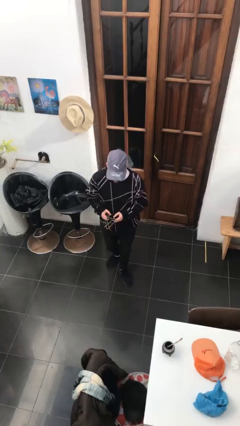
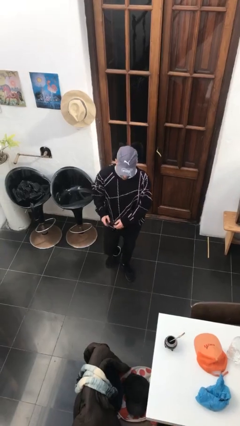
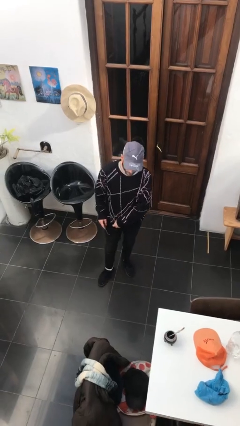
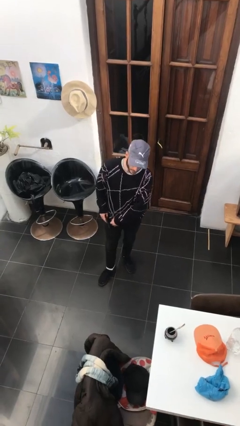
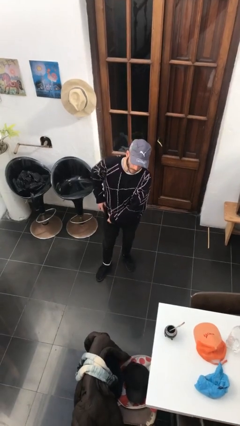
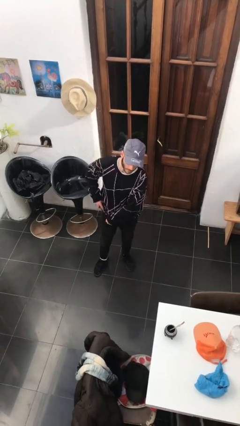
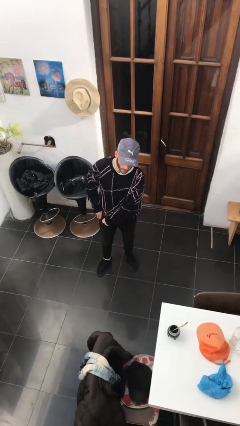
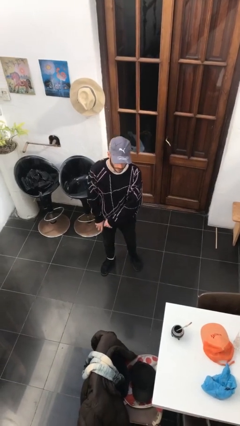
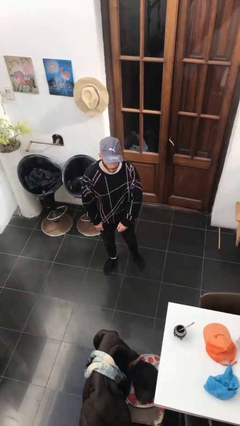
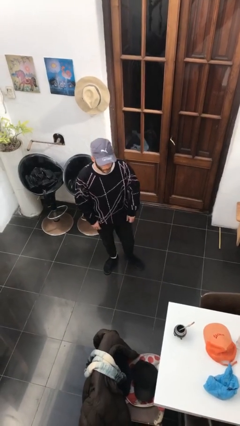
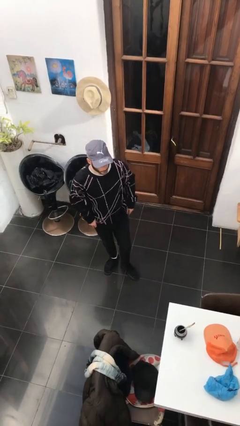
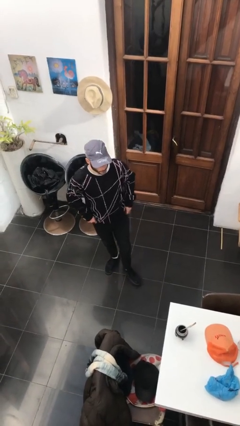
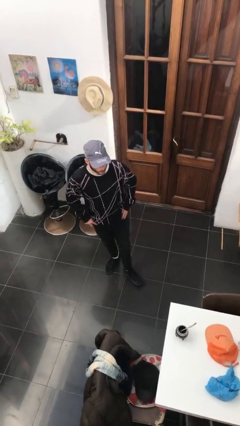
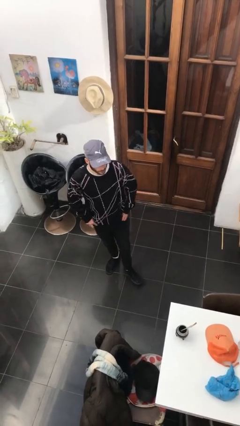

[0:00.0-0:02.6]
person puts phone into pocket

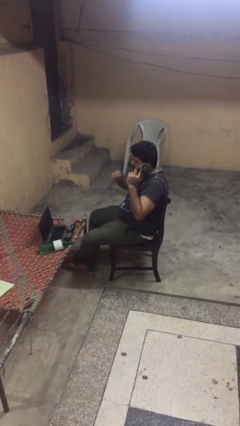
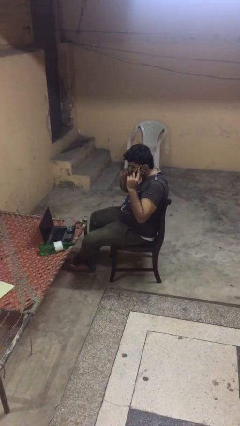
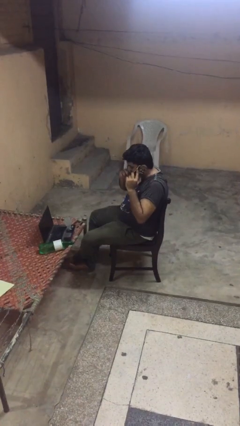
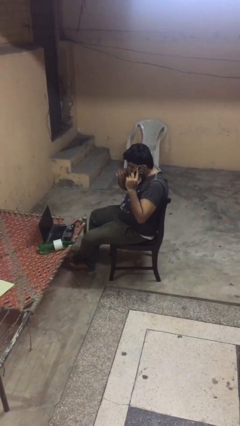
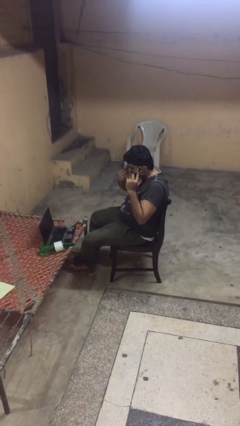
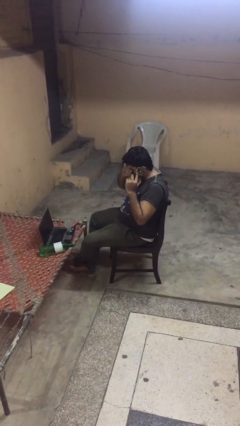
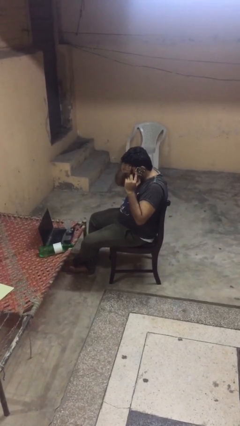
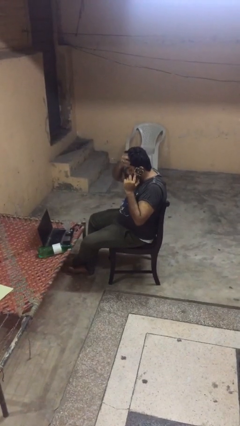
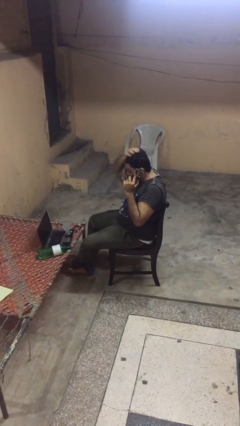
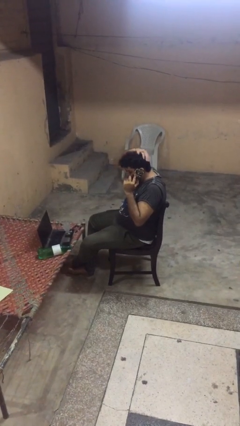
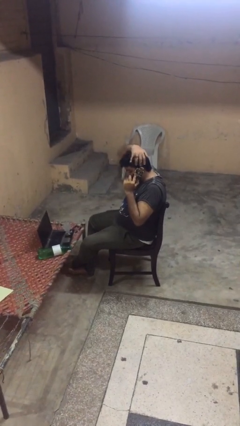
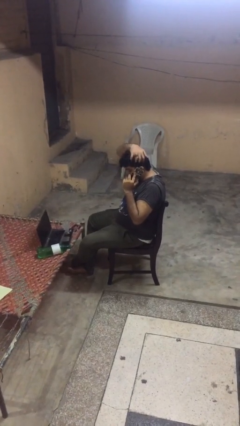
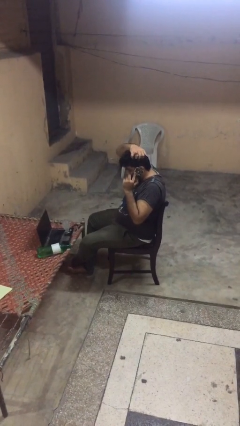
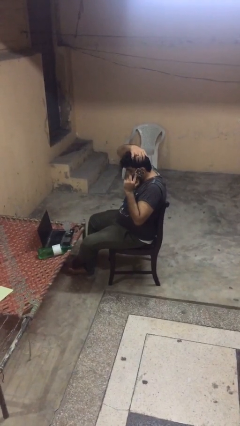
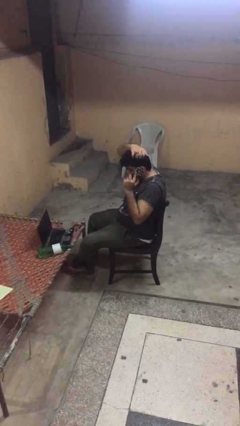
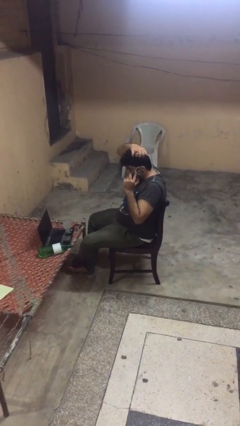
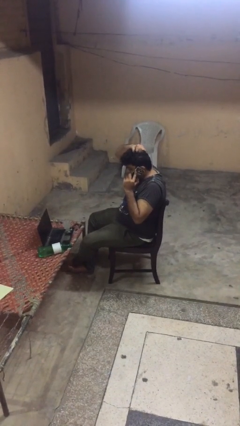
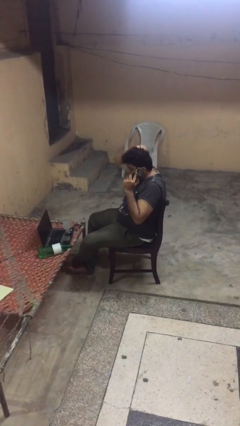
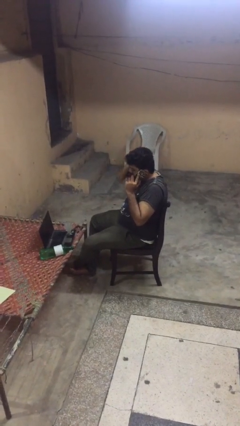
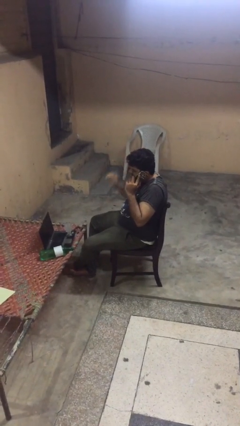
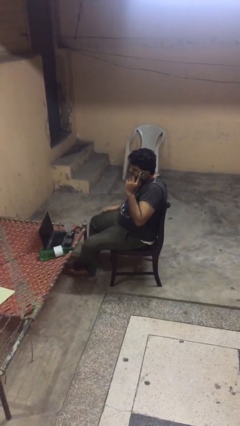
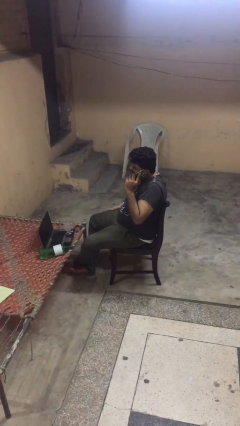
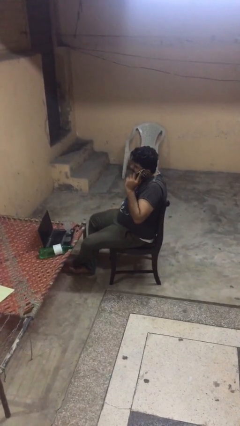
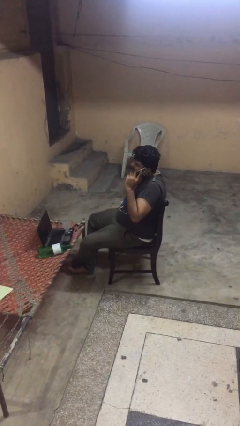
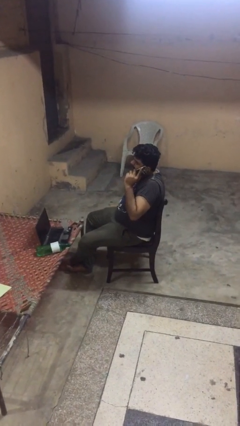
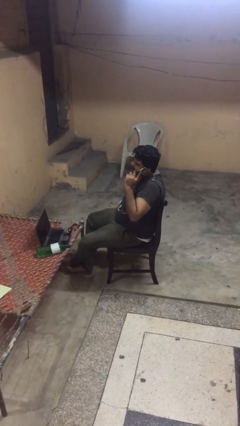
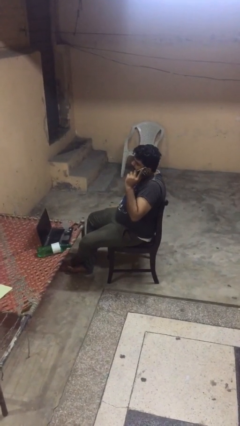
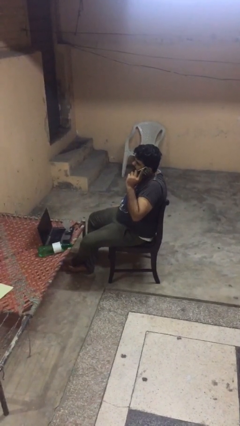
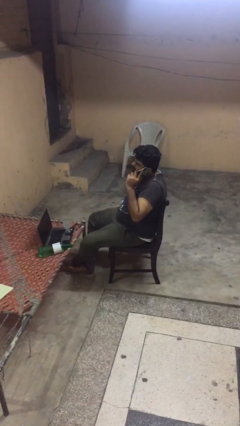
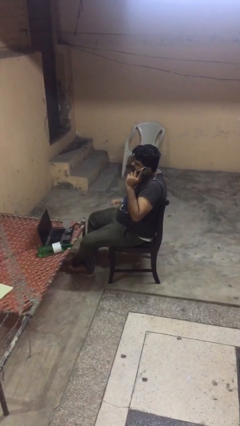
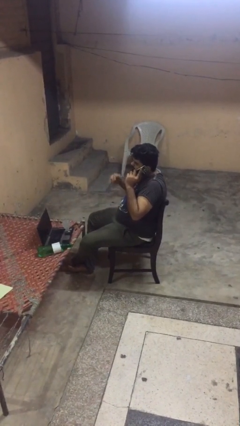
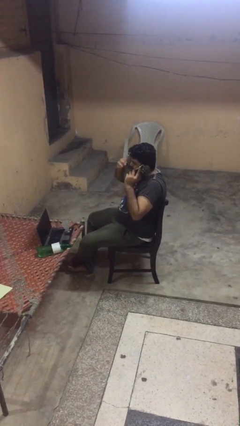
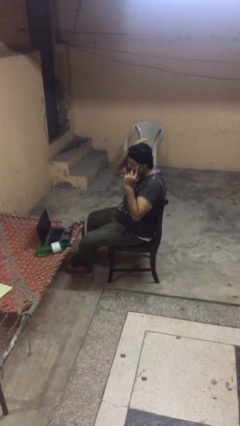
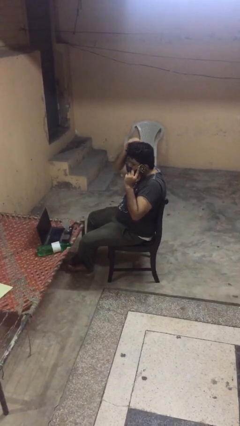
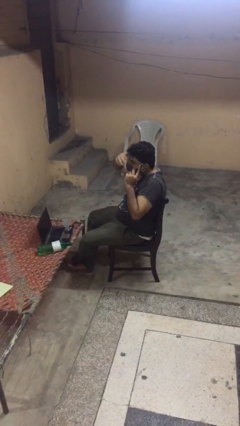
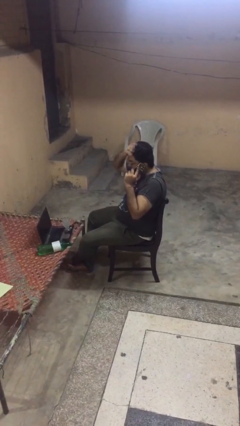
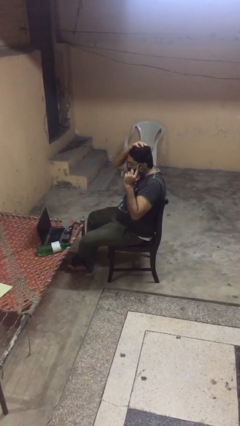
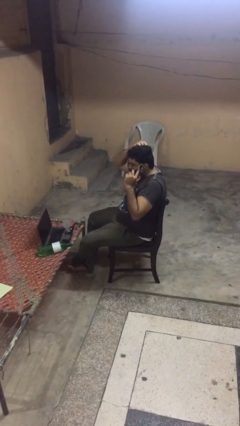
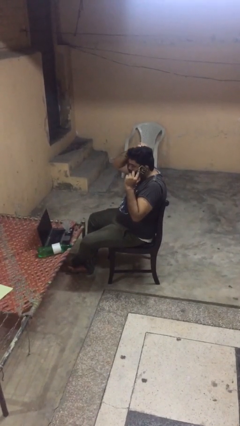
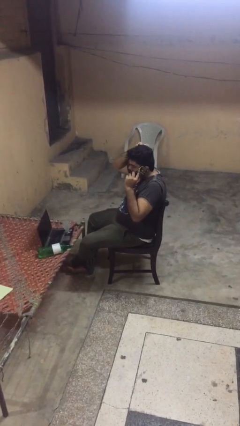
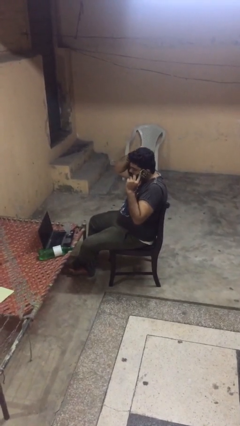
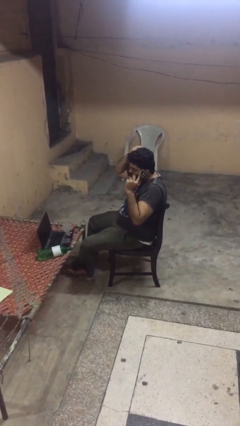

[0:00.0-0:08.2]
person talks on phone

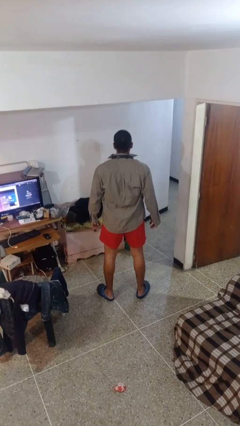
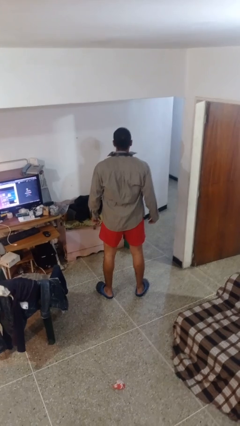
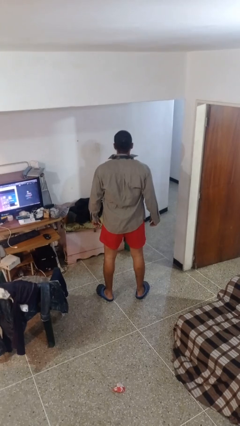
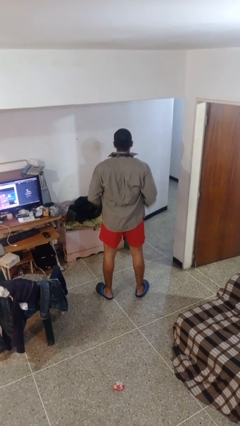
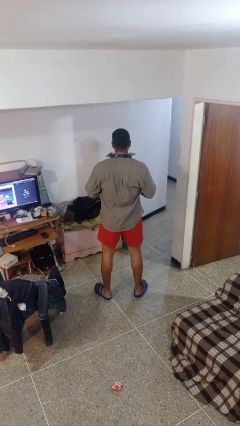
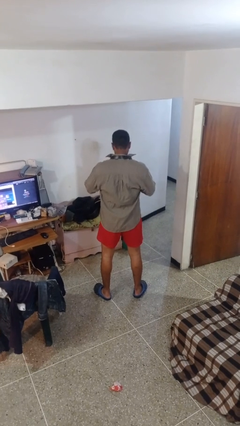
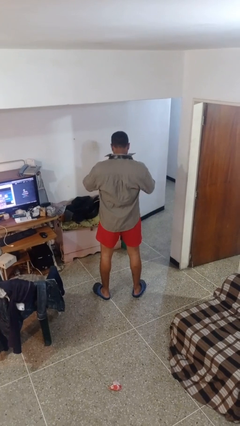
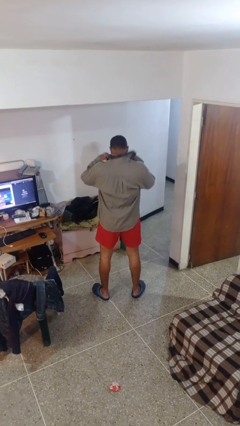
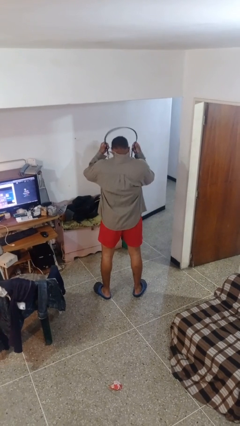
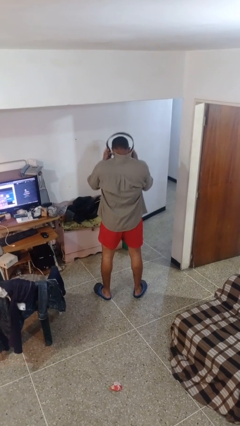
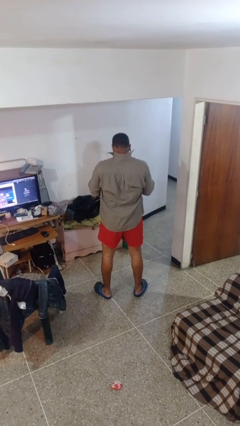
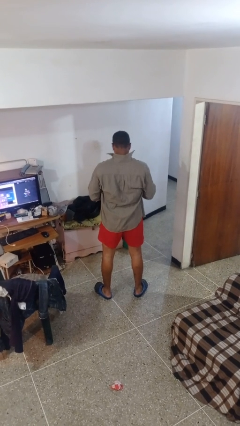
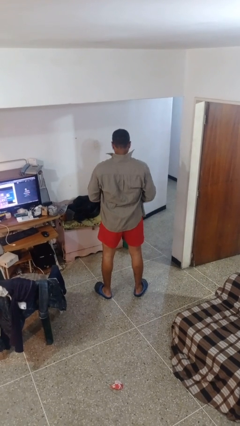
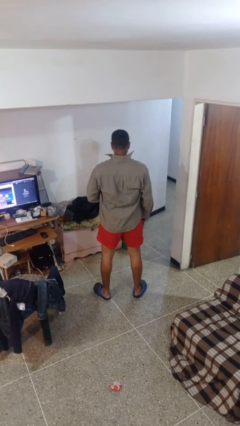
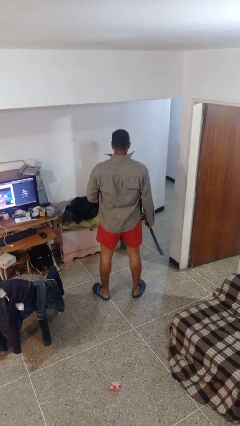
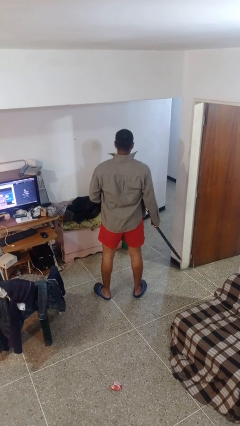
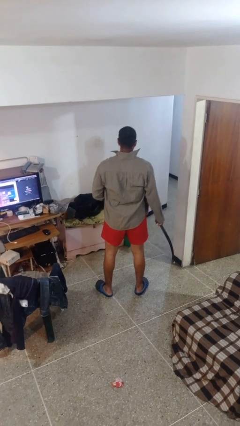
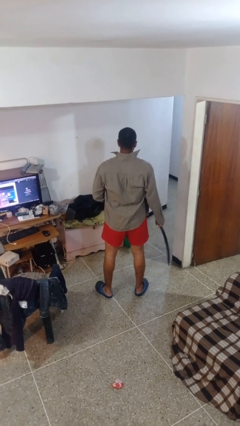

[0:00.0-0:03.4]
person takes off necktie

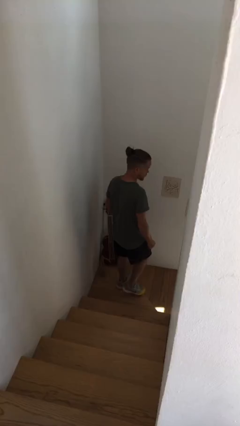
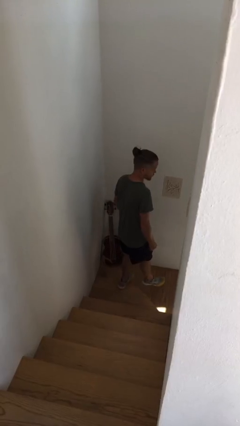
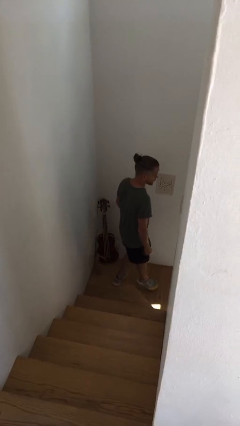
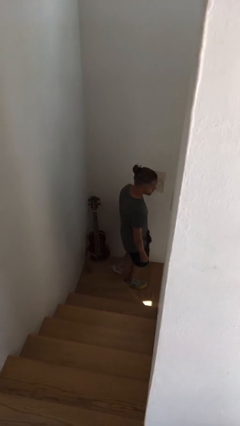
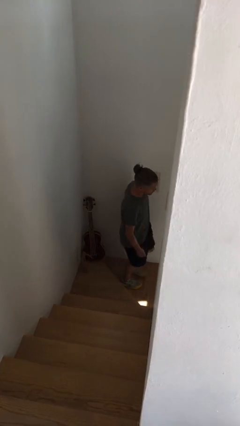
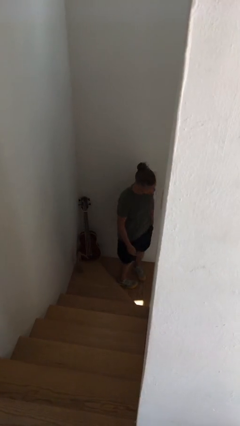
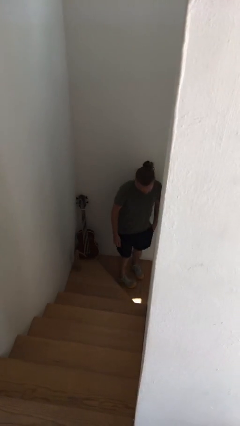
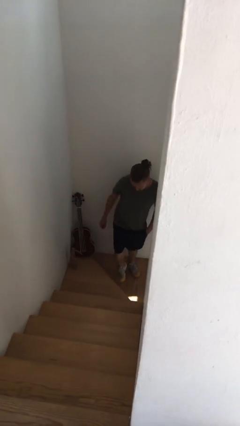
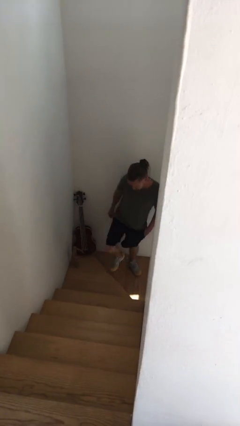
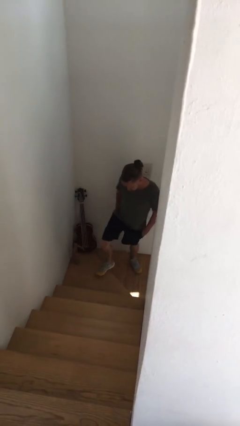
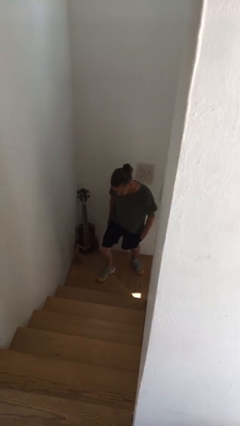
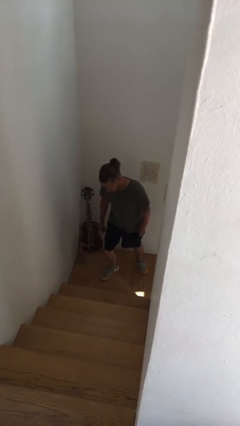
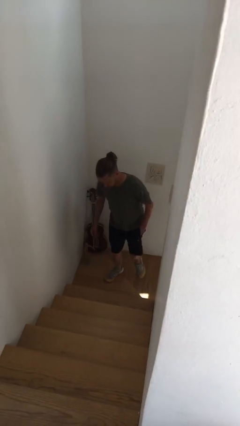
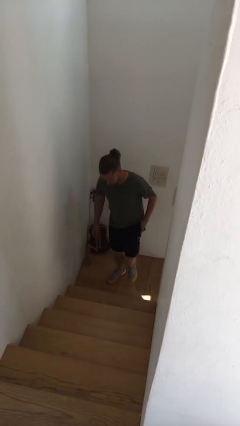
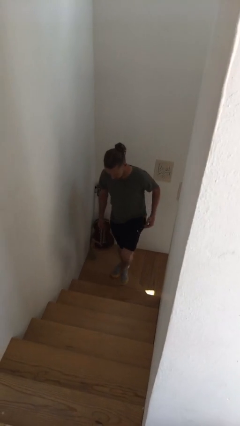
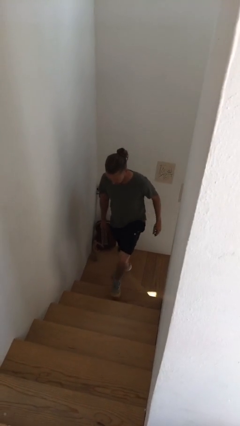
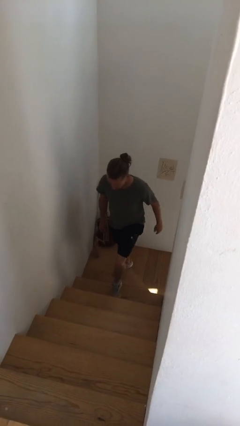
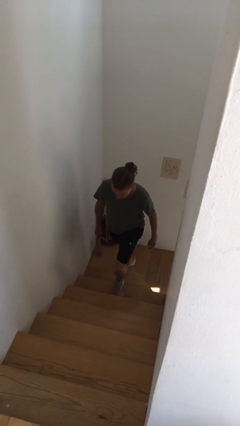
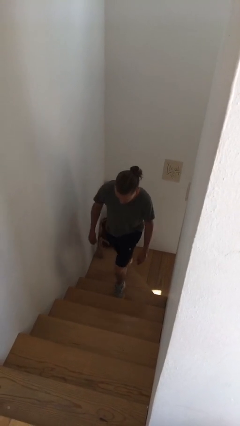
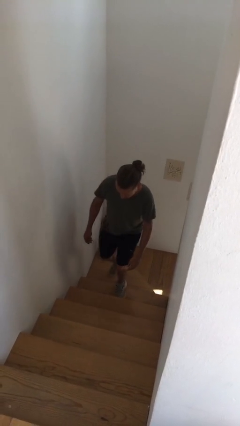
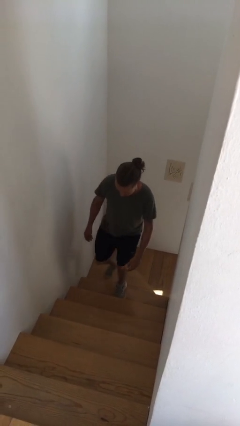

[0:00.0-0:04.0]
person climbs up stairs
